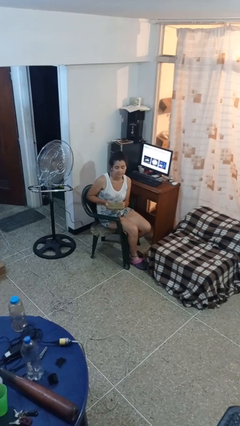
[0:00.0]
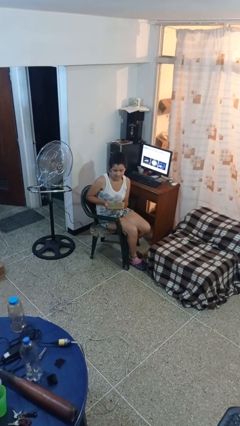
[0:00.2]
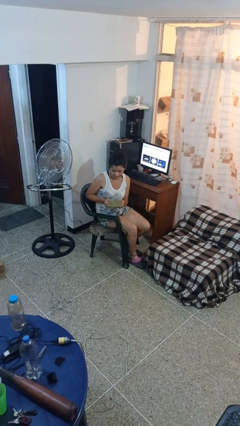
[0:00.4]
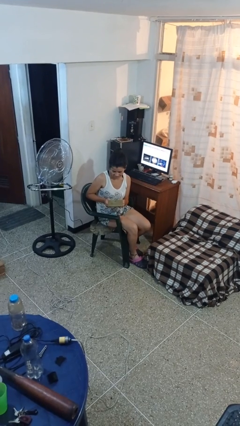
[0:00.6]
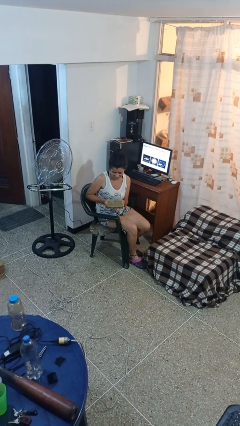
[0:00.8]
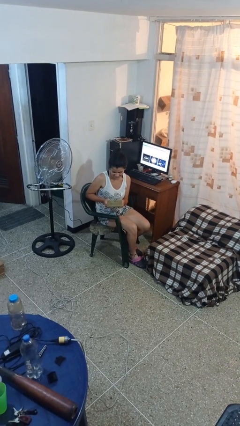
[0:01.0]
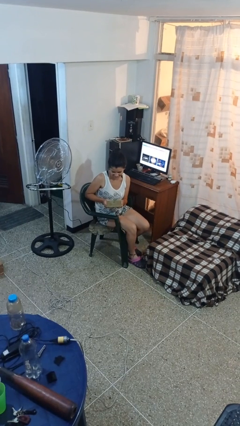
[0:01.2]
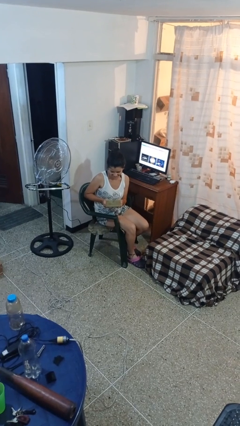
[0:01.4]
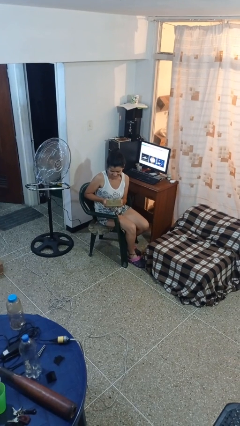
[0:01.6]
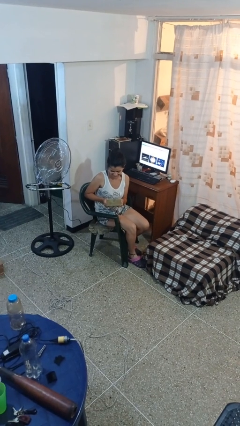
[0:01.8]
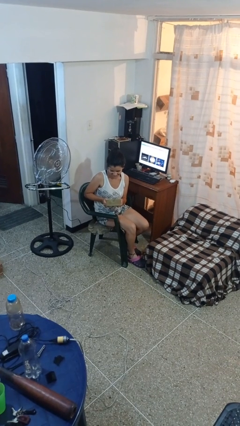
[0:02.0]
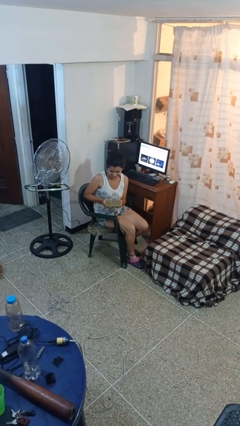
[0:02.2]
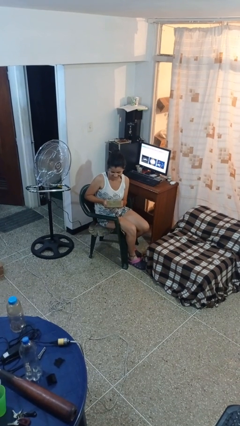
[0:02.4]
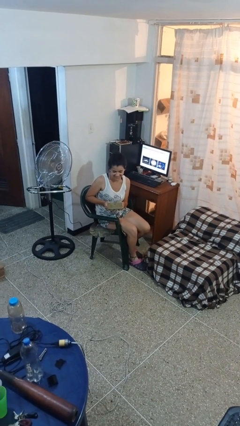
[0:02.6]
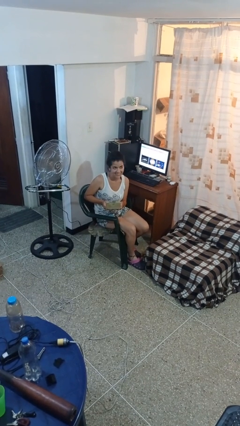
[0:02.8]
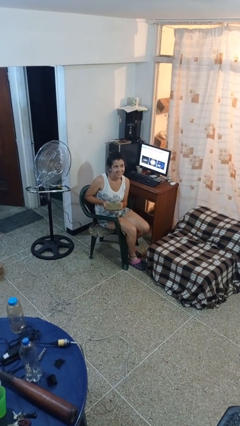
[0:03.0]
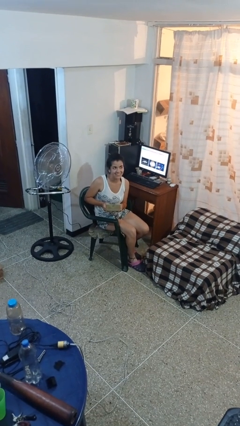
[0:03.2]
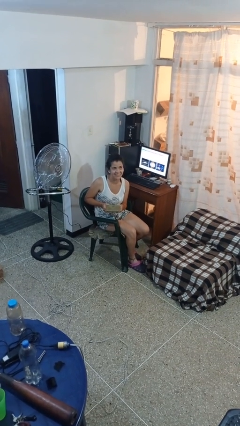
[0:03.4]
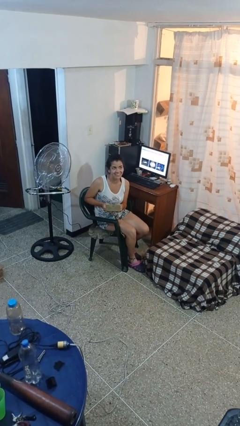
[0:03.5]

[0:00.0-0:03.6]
person interacts with handheld game

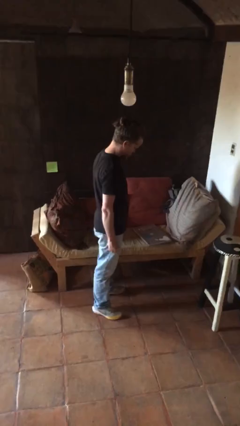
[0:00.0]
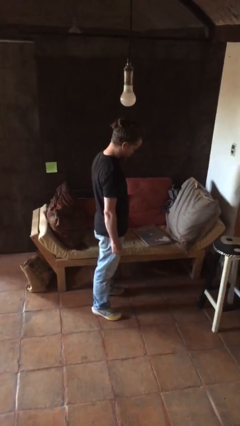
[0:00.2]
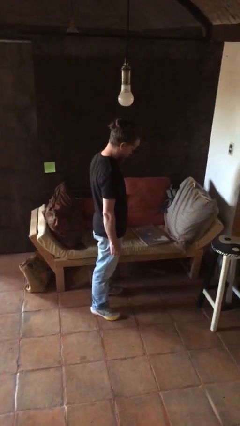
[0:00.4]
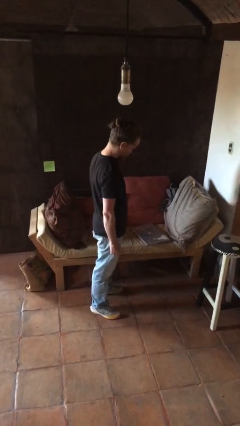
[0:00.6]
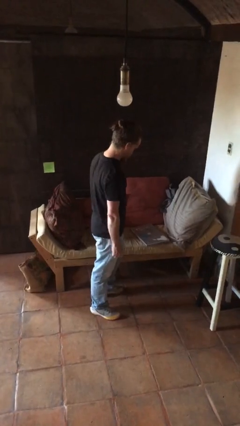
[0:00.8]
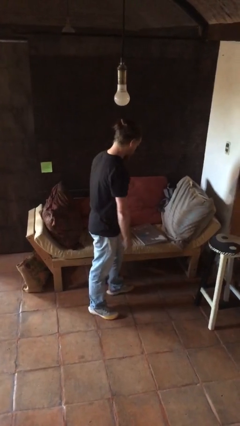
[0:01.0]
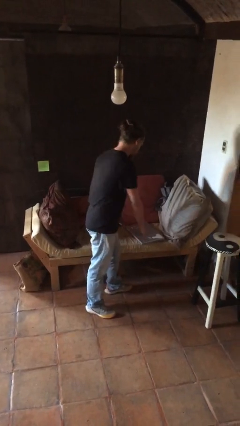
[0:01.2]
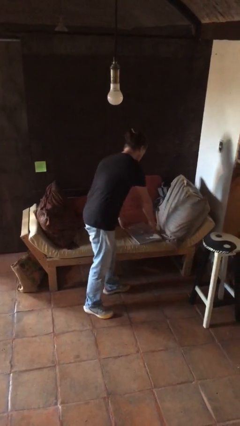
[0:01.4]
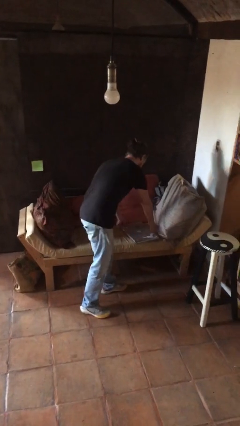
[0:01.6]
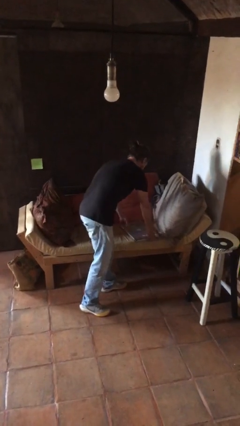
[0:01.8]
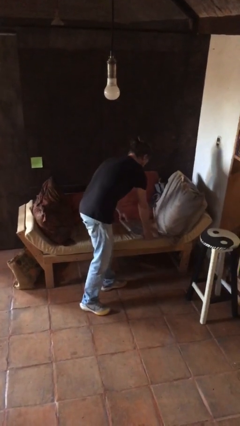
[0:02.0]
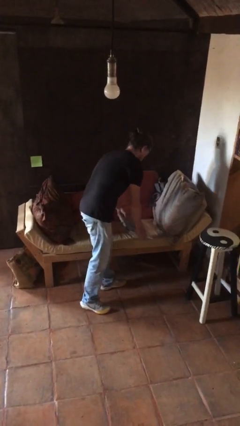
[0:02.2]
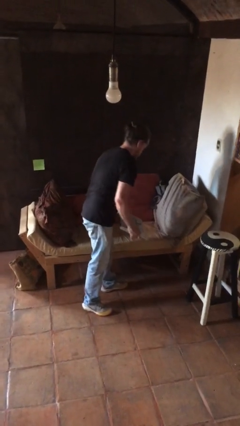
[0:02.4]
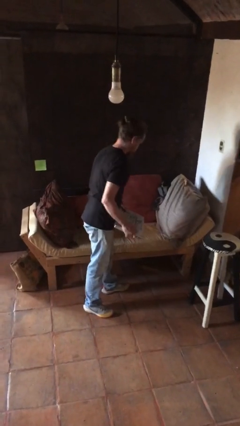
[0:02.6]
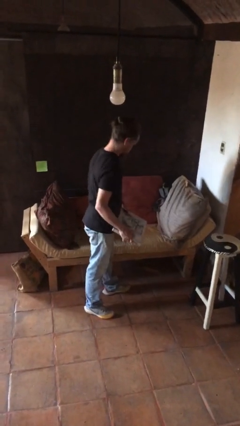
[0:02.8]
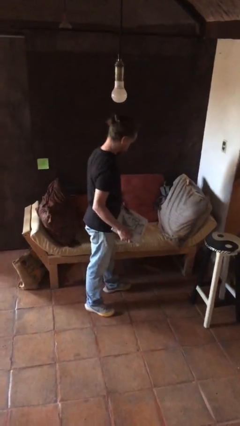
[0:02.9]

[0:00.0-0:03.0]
person picks up object from couch

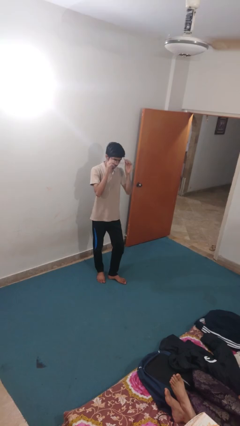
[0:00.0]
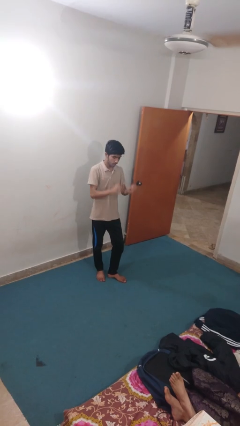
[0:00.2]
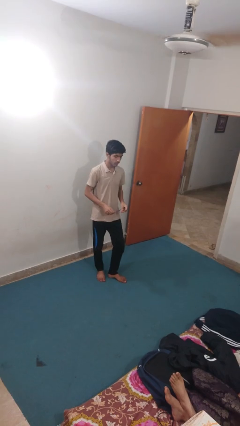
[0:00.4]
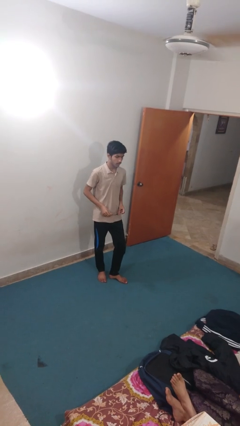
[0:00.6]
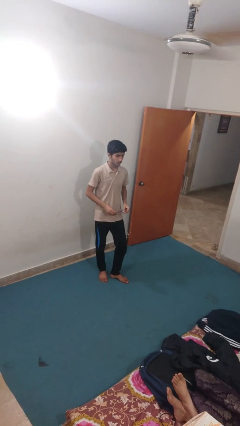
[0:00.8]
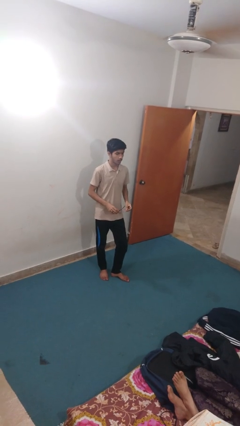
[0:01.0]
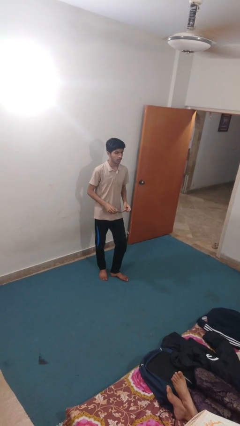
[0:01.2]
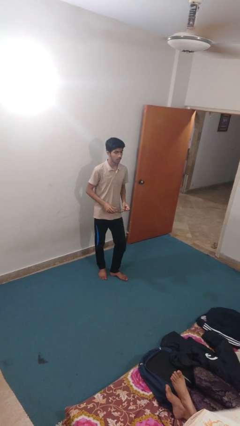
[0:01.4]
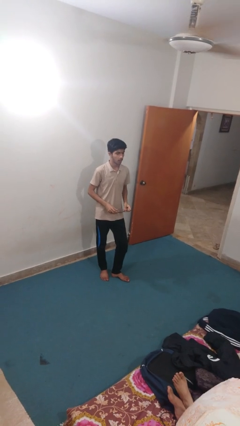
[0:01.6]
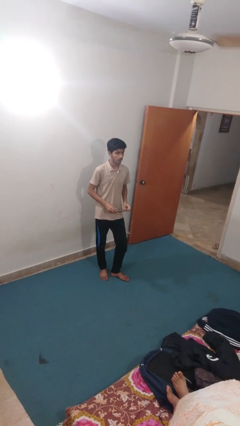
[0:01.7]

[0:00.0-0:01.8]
person takes off glasses

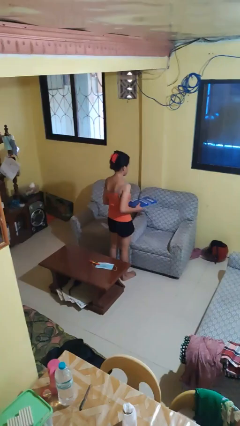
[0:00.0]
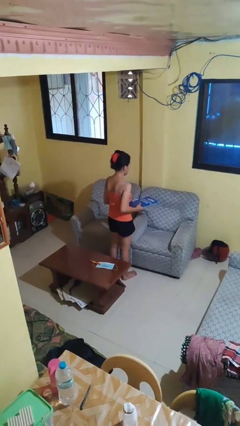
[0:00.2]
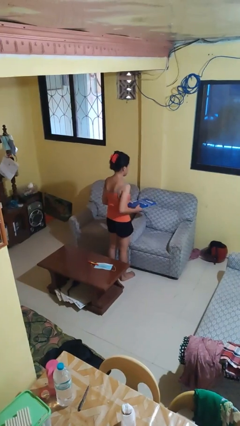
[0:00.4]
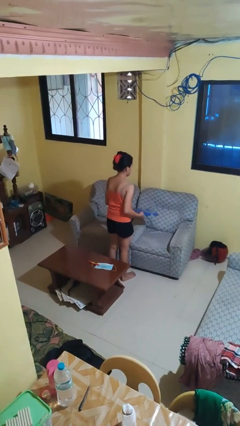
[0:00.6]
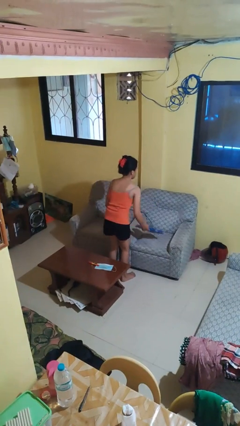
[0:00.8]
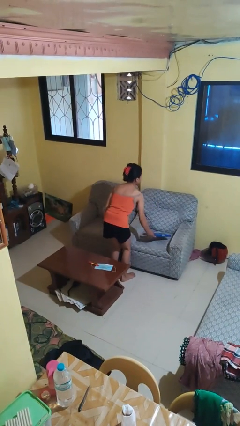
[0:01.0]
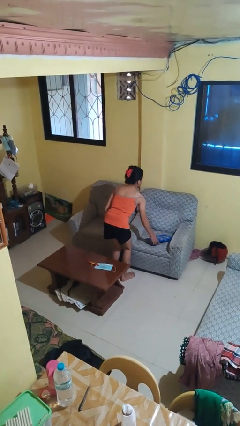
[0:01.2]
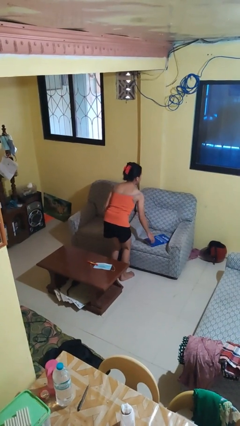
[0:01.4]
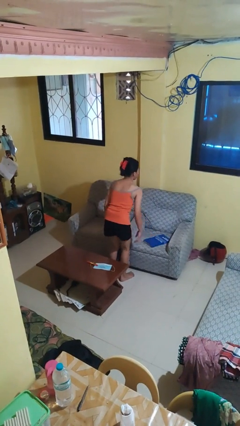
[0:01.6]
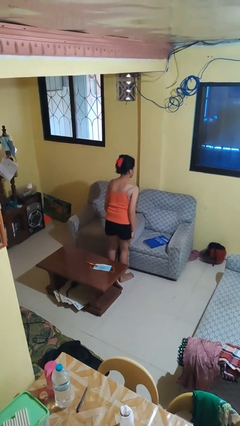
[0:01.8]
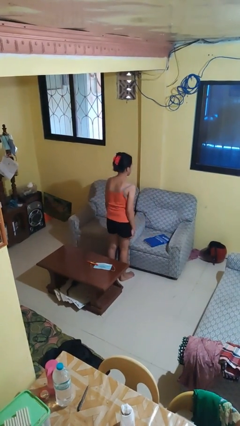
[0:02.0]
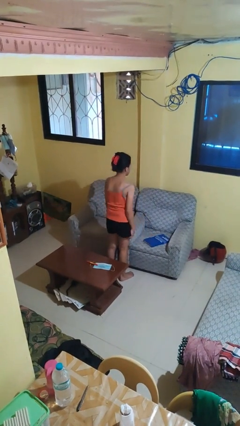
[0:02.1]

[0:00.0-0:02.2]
person puts down object on couch

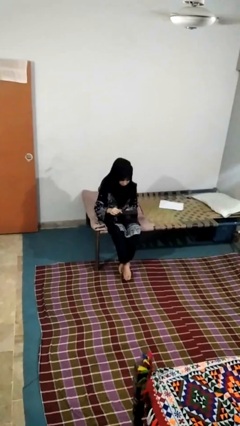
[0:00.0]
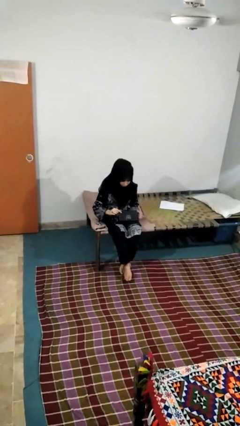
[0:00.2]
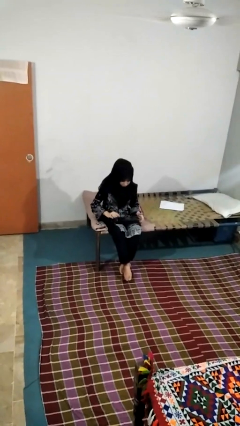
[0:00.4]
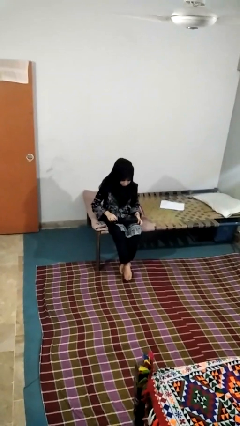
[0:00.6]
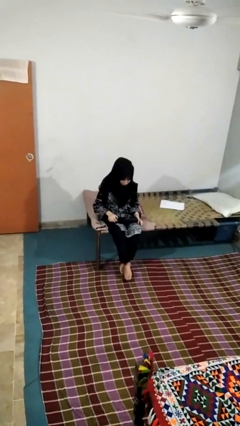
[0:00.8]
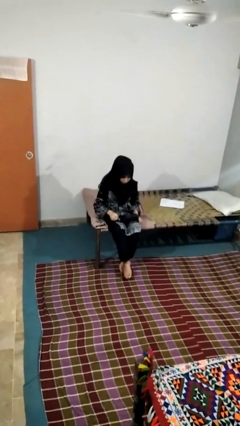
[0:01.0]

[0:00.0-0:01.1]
person closes jewelry box

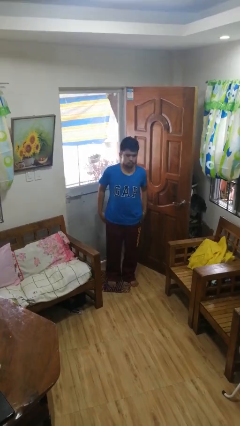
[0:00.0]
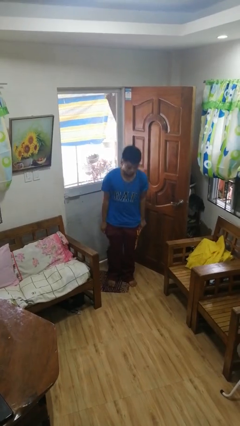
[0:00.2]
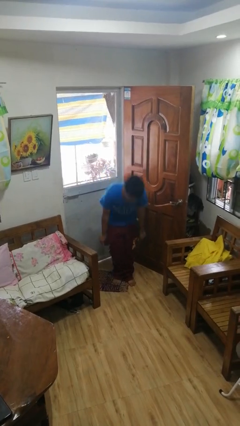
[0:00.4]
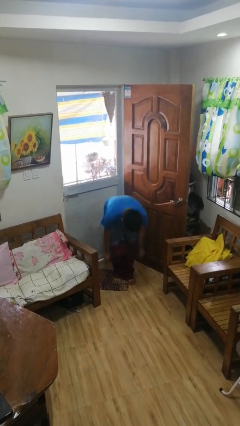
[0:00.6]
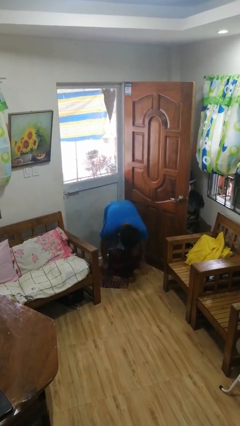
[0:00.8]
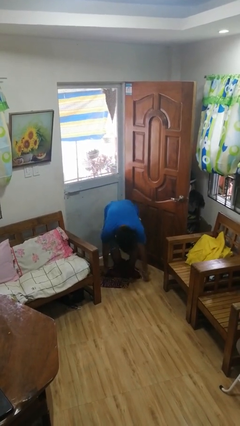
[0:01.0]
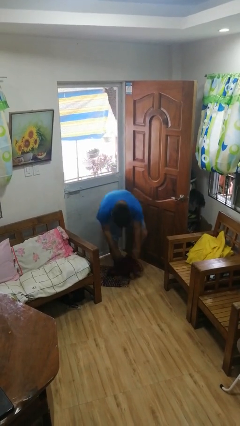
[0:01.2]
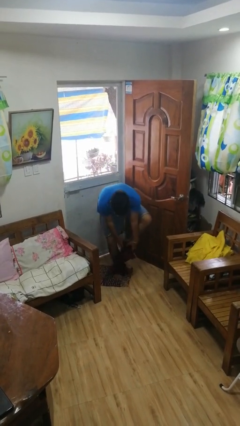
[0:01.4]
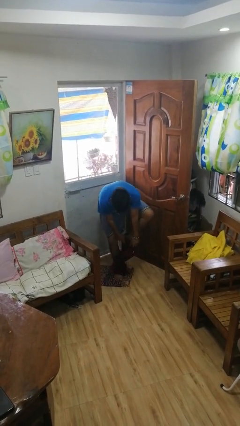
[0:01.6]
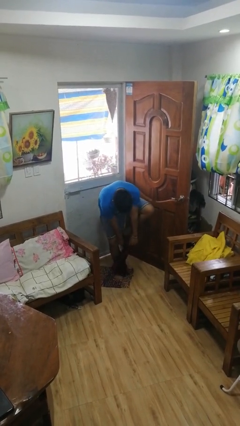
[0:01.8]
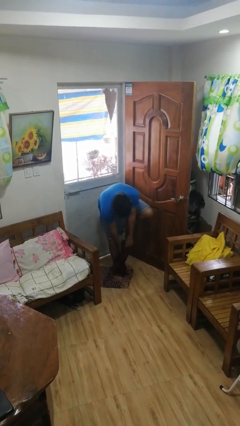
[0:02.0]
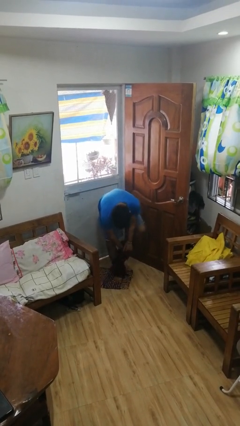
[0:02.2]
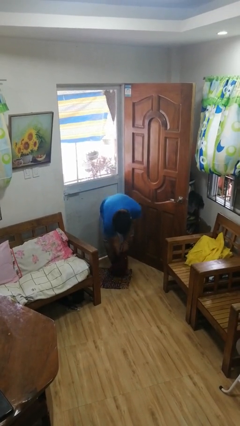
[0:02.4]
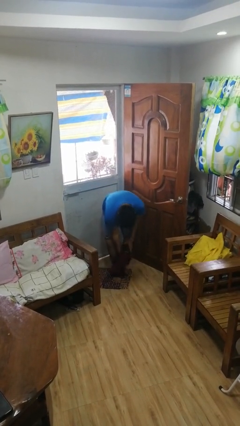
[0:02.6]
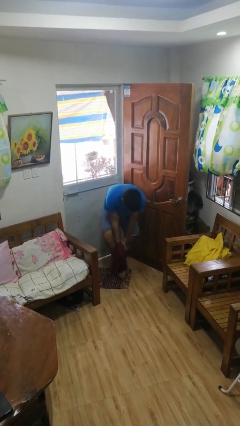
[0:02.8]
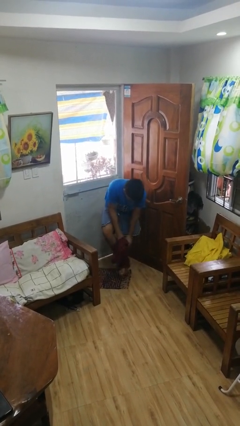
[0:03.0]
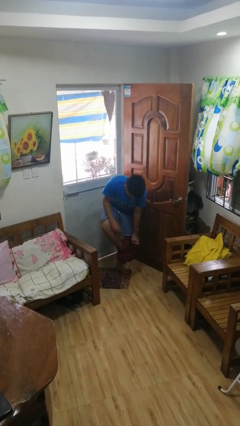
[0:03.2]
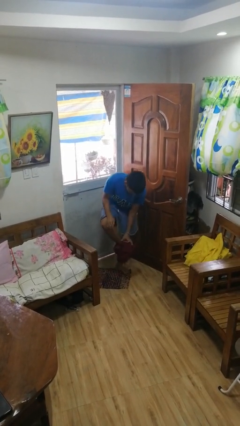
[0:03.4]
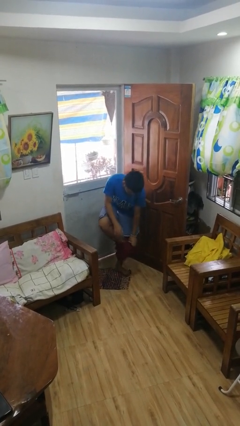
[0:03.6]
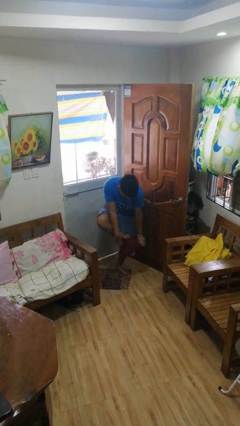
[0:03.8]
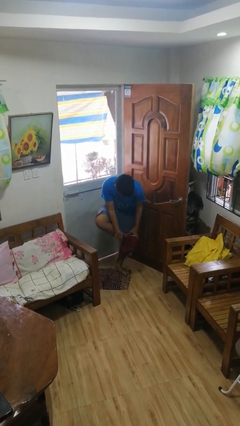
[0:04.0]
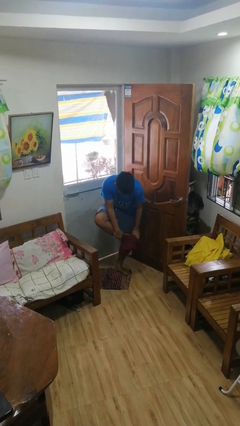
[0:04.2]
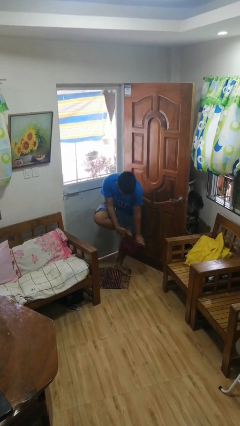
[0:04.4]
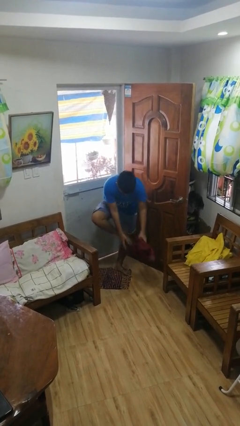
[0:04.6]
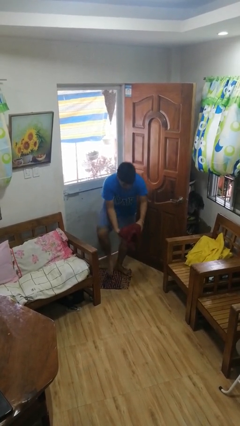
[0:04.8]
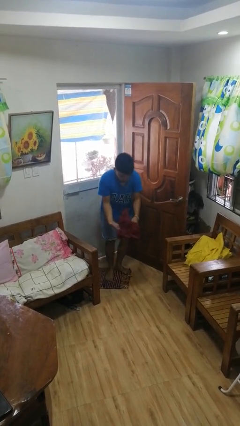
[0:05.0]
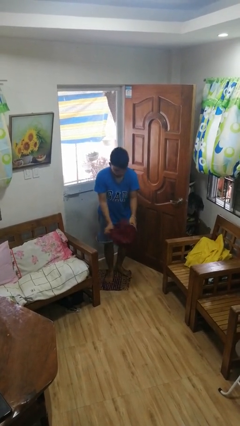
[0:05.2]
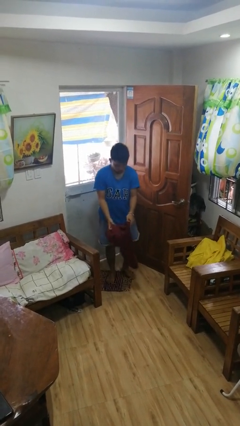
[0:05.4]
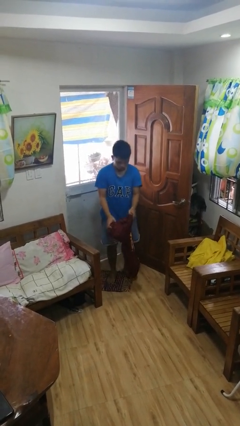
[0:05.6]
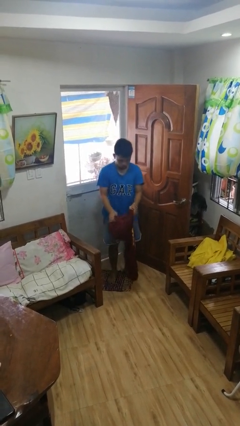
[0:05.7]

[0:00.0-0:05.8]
person takes off pants
